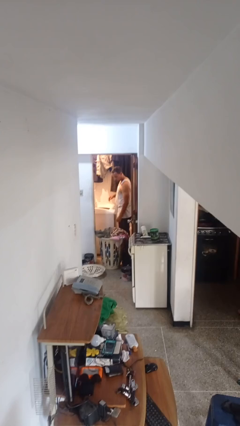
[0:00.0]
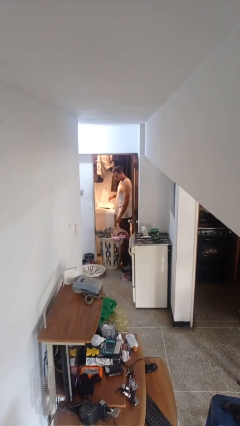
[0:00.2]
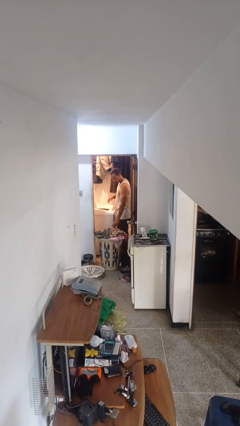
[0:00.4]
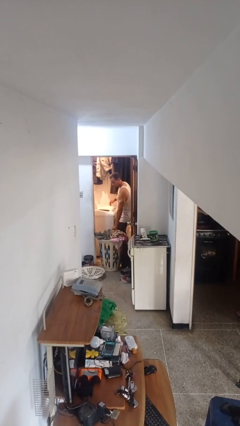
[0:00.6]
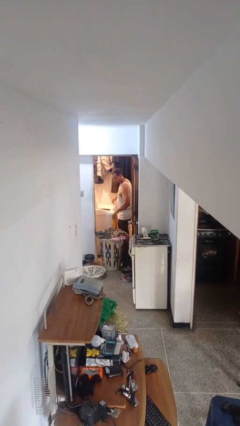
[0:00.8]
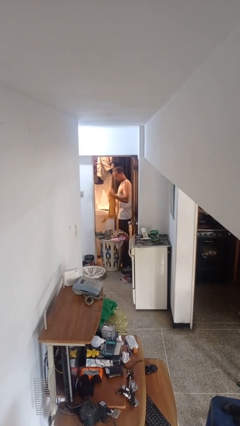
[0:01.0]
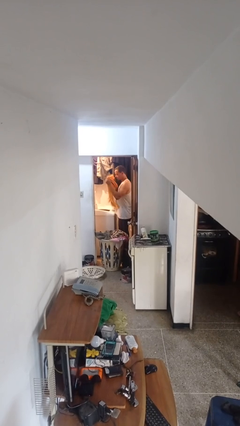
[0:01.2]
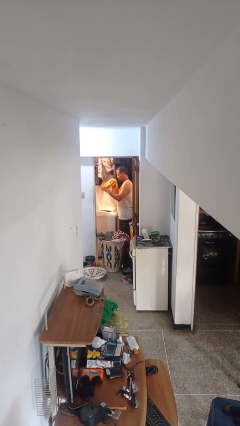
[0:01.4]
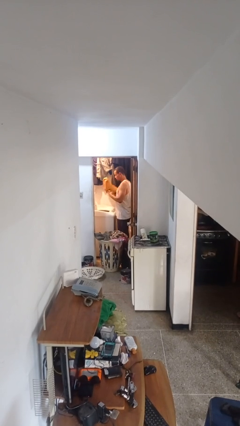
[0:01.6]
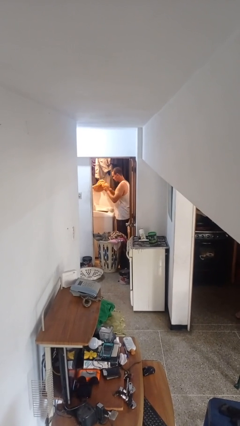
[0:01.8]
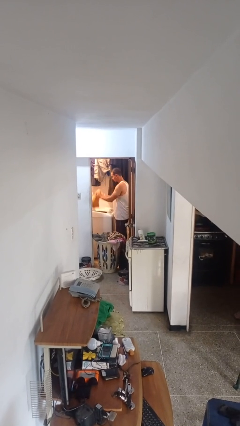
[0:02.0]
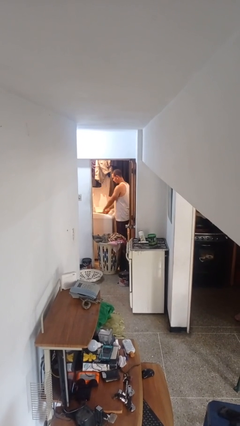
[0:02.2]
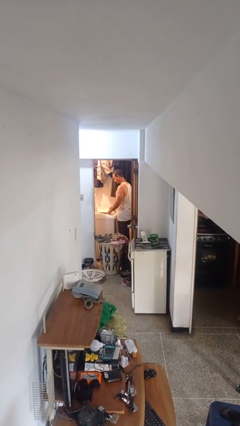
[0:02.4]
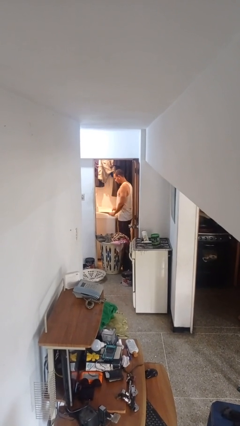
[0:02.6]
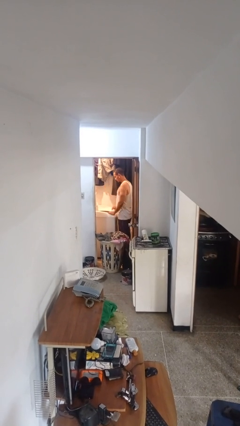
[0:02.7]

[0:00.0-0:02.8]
person loads clotheswasher

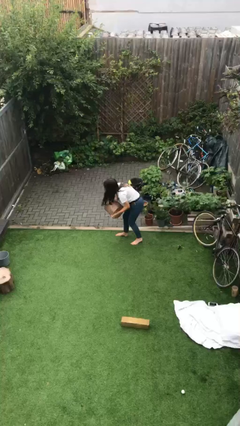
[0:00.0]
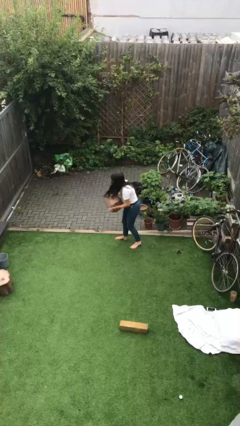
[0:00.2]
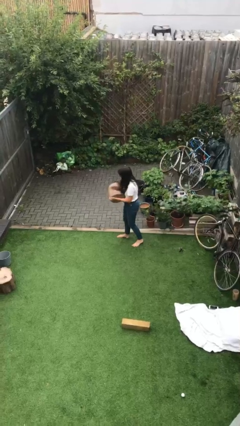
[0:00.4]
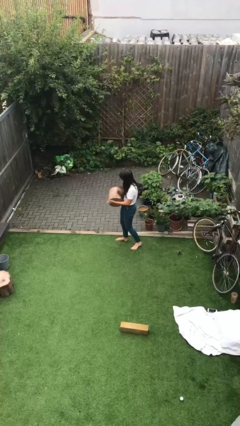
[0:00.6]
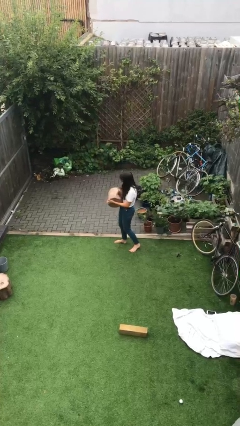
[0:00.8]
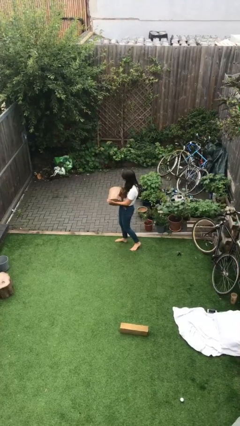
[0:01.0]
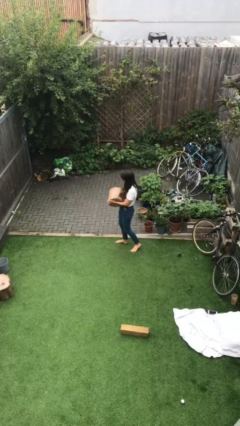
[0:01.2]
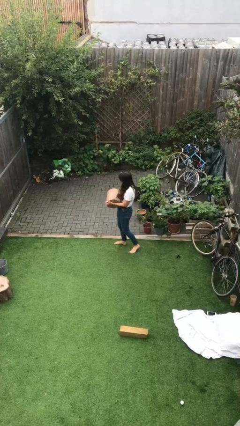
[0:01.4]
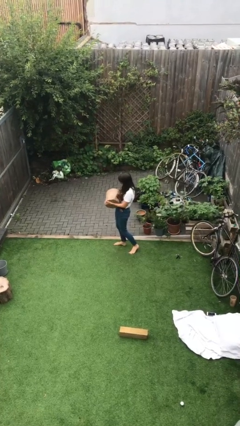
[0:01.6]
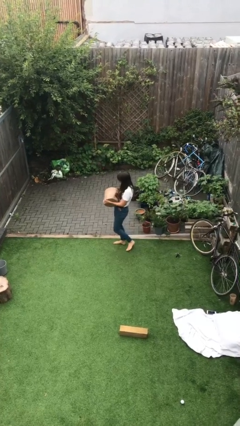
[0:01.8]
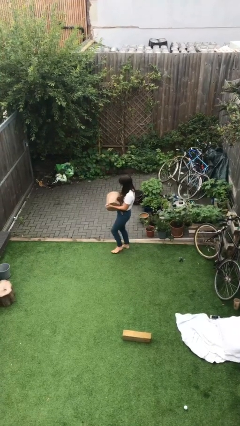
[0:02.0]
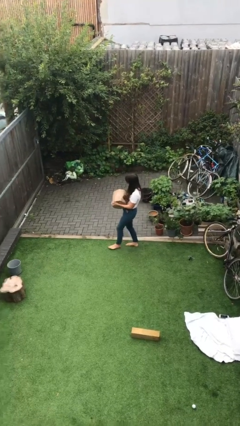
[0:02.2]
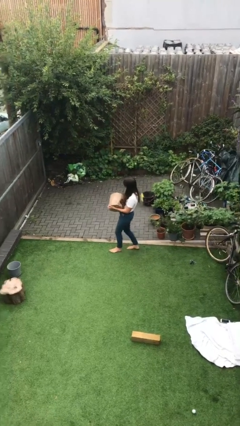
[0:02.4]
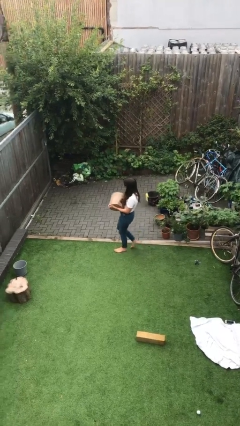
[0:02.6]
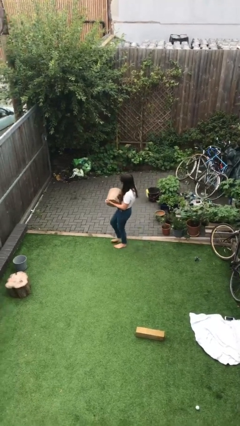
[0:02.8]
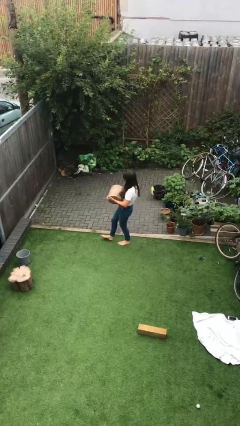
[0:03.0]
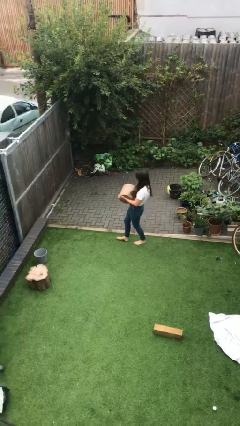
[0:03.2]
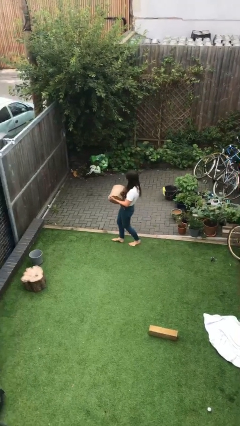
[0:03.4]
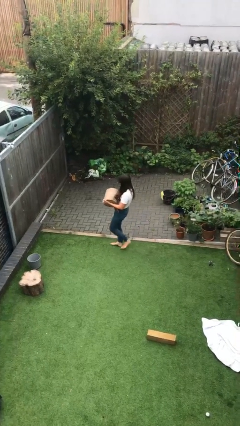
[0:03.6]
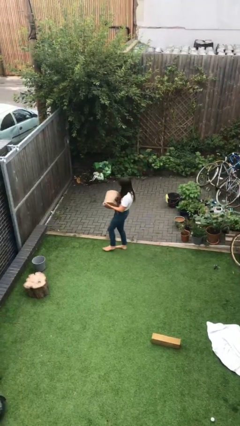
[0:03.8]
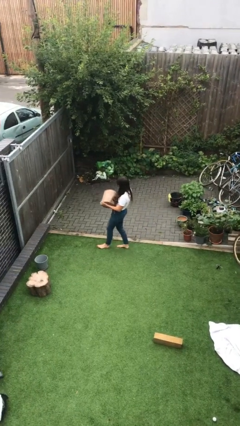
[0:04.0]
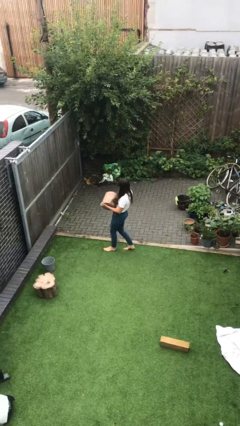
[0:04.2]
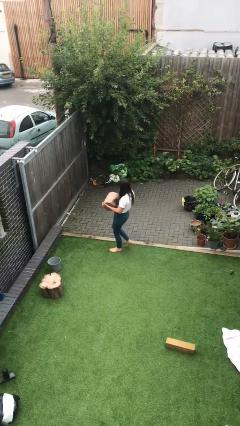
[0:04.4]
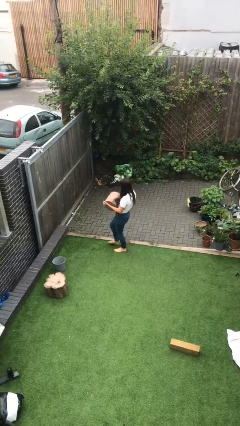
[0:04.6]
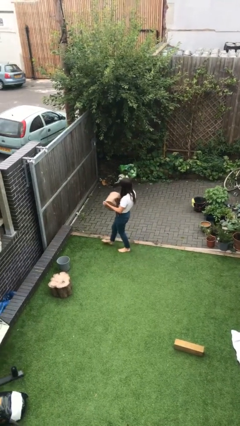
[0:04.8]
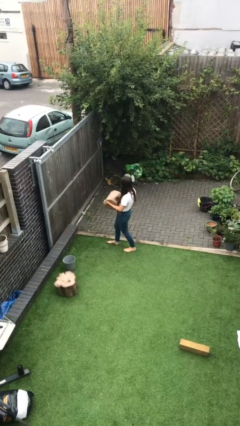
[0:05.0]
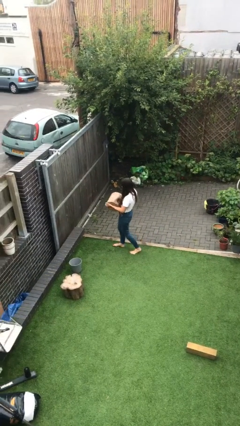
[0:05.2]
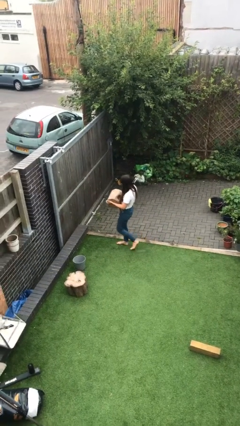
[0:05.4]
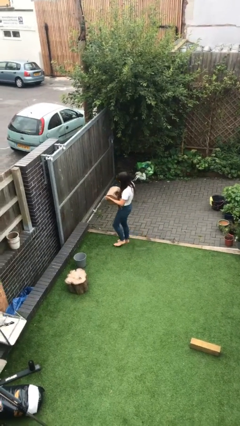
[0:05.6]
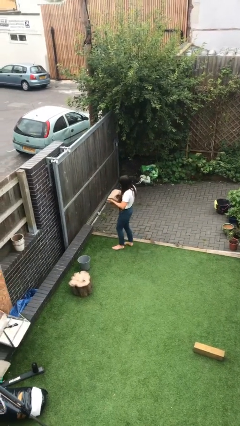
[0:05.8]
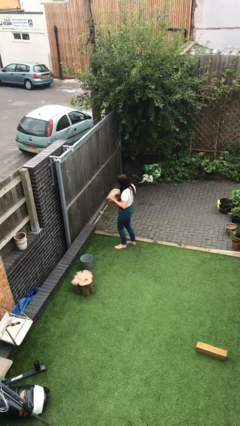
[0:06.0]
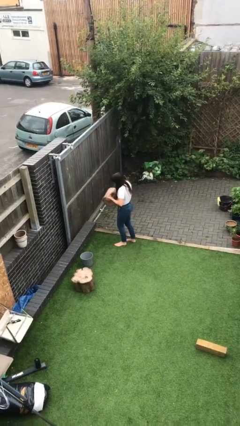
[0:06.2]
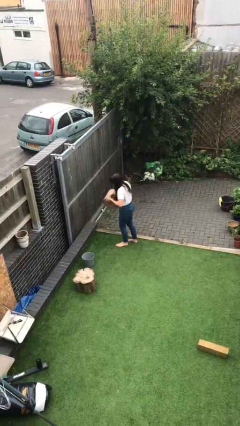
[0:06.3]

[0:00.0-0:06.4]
person carries heavy object

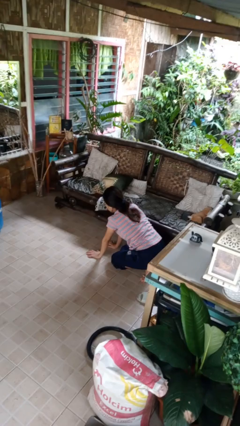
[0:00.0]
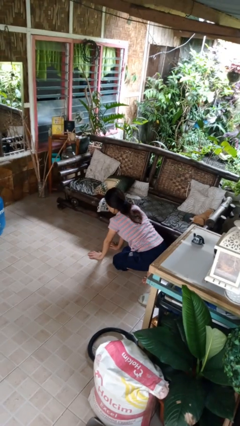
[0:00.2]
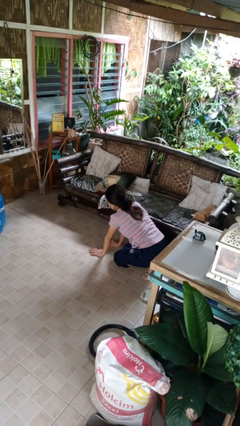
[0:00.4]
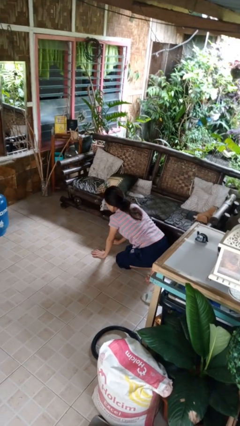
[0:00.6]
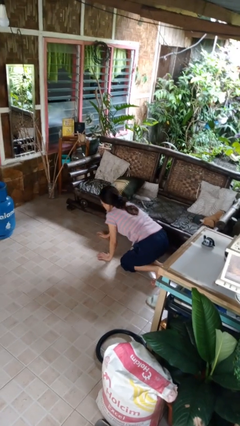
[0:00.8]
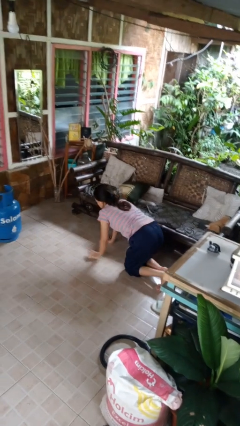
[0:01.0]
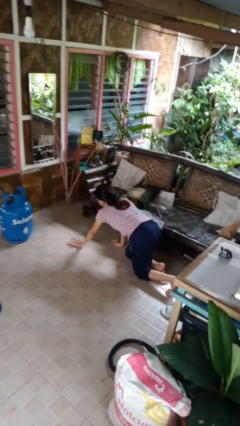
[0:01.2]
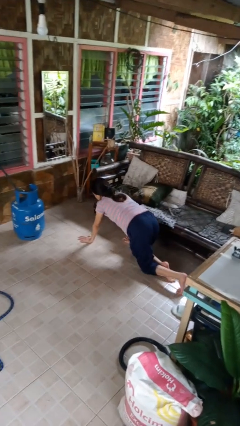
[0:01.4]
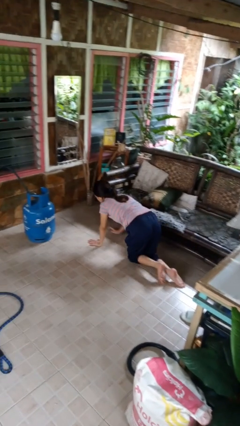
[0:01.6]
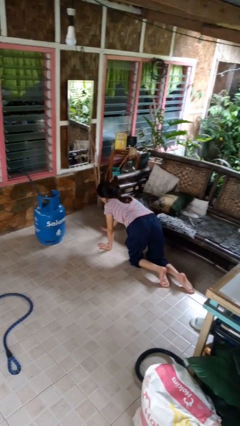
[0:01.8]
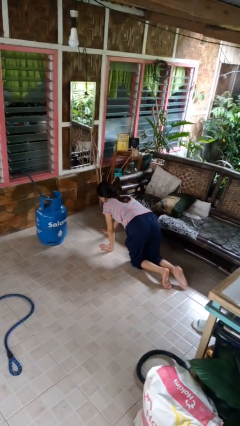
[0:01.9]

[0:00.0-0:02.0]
person crawls

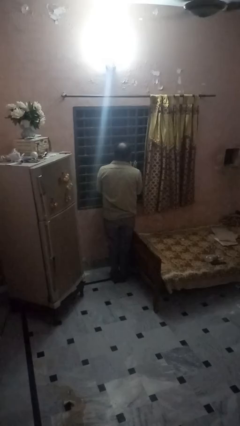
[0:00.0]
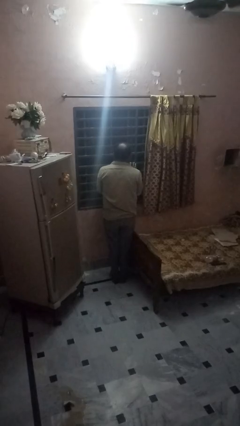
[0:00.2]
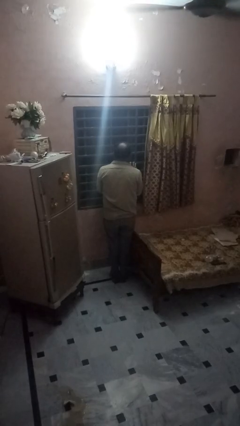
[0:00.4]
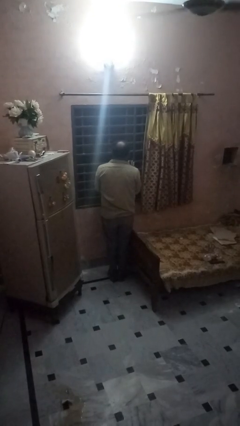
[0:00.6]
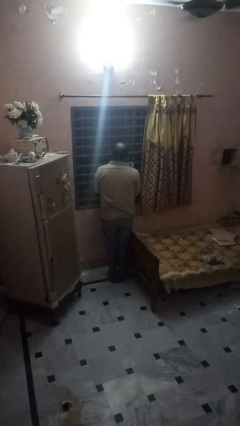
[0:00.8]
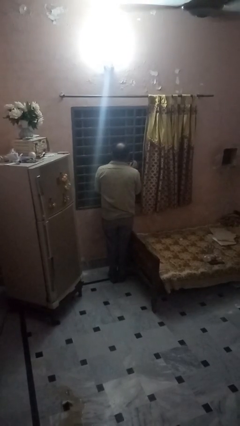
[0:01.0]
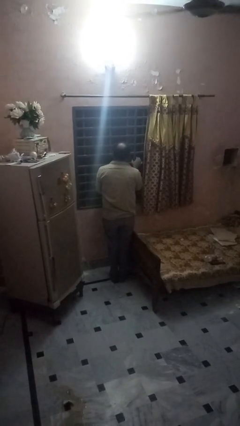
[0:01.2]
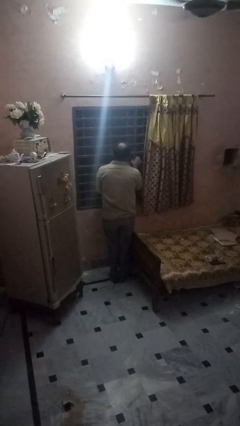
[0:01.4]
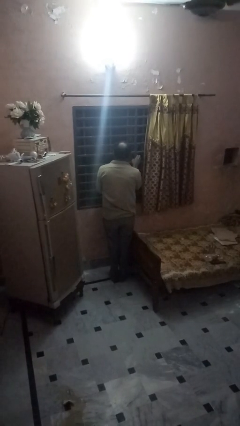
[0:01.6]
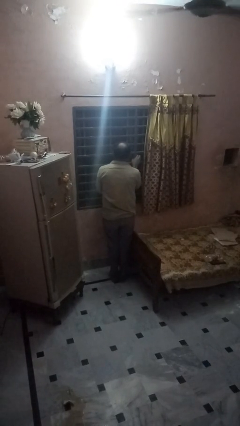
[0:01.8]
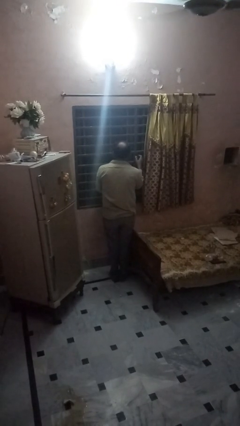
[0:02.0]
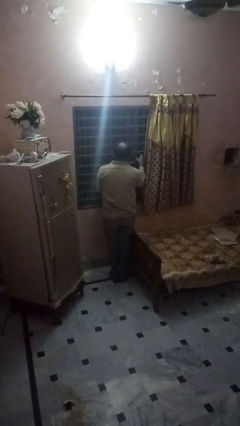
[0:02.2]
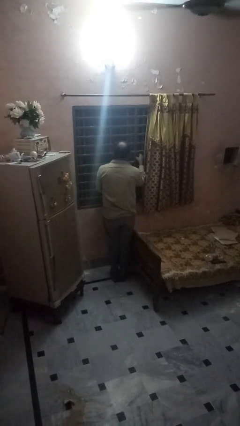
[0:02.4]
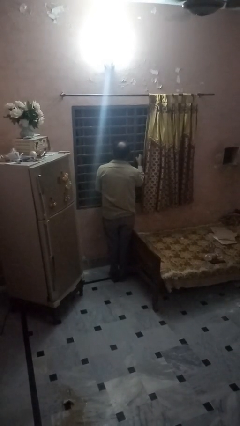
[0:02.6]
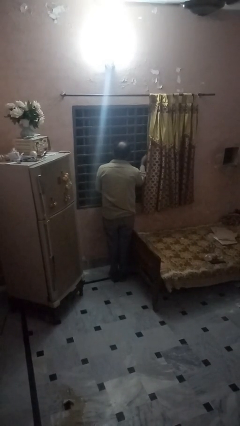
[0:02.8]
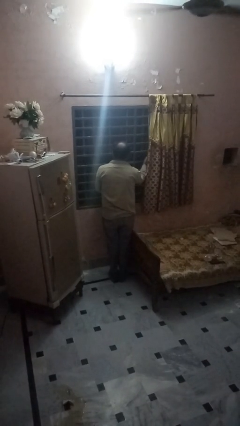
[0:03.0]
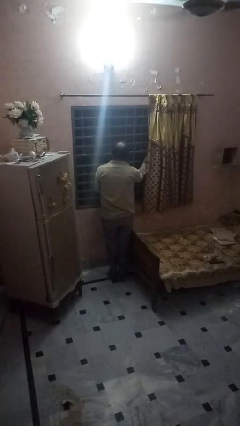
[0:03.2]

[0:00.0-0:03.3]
person opens home window

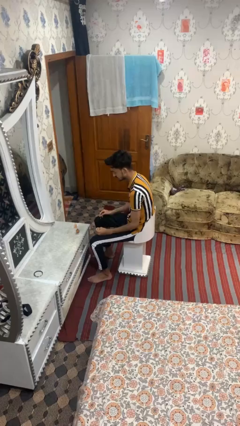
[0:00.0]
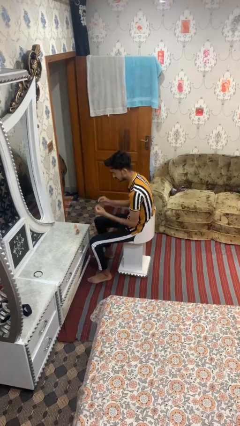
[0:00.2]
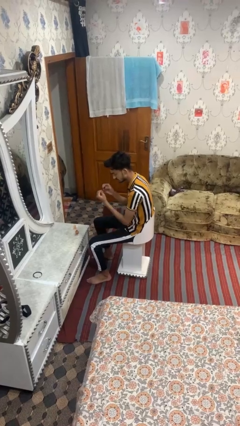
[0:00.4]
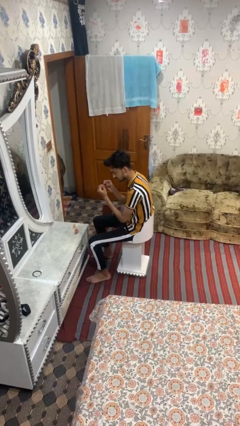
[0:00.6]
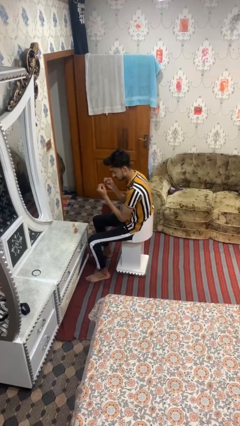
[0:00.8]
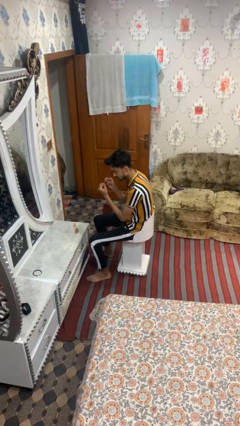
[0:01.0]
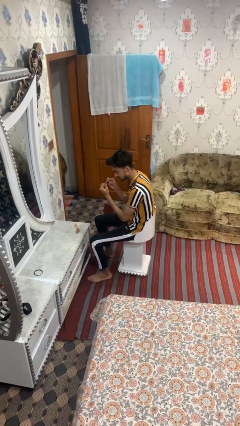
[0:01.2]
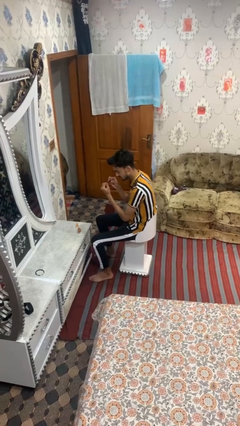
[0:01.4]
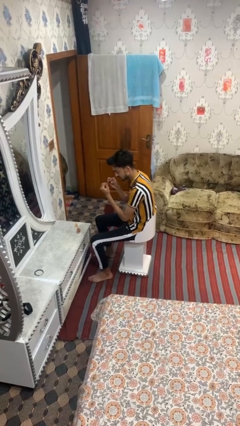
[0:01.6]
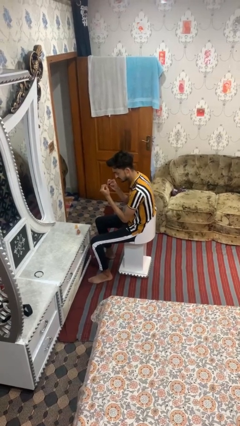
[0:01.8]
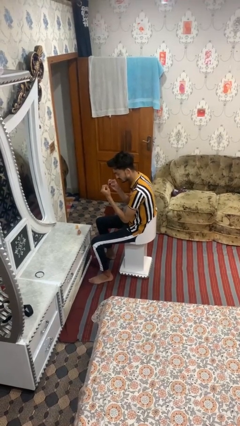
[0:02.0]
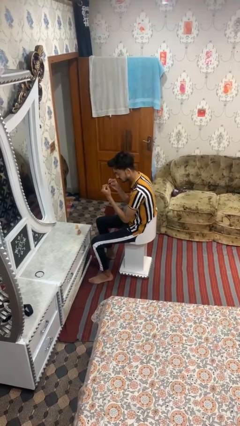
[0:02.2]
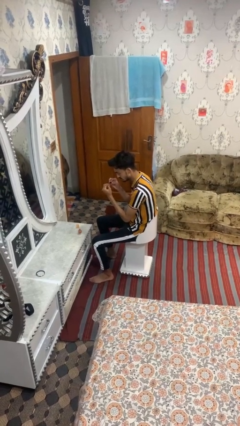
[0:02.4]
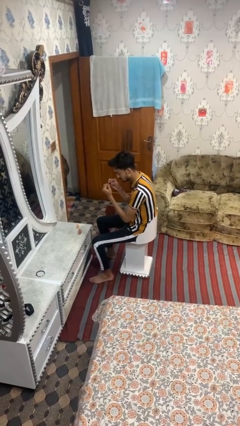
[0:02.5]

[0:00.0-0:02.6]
person paints fingernails

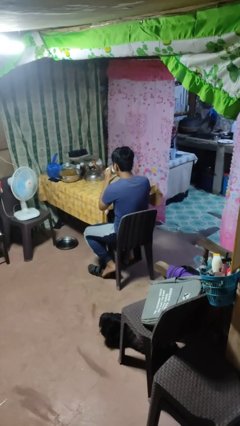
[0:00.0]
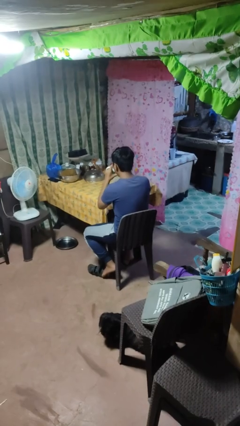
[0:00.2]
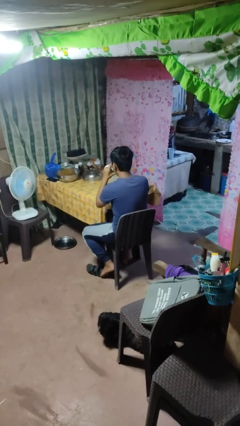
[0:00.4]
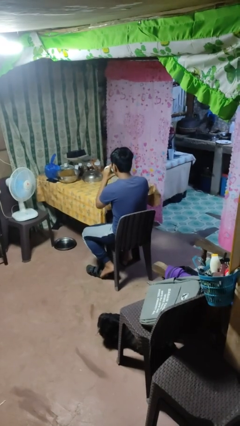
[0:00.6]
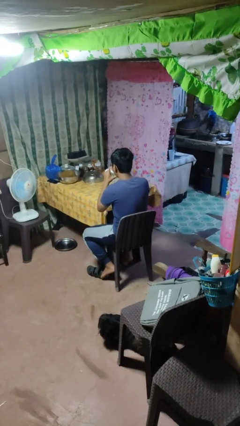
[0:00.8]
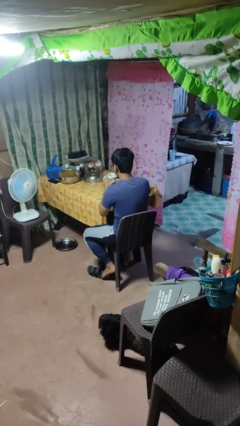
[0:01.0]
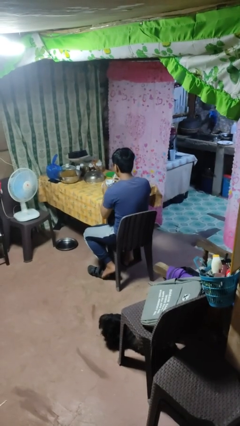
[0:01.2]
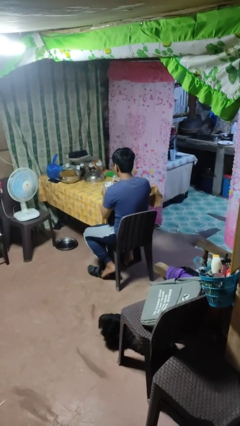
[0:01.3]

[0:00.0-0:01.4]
person drinks from mug
